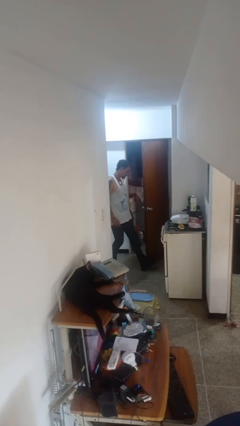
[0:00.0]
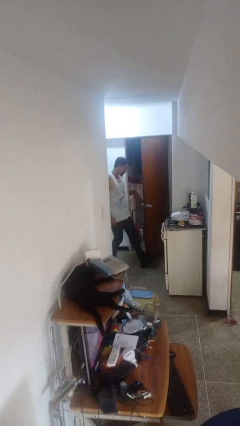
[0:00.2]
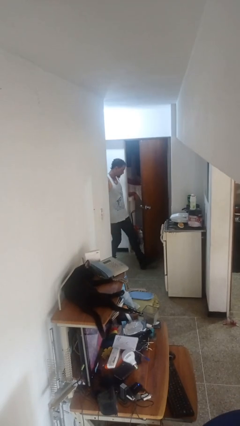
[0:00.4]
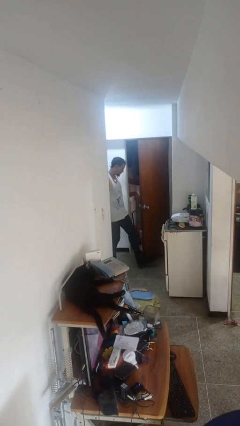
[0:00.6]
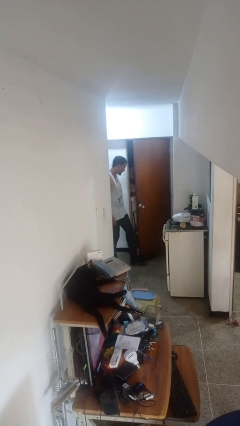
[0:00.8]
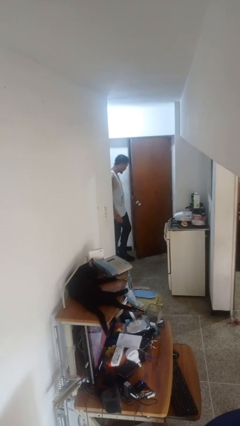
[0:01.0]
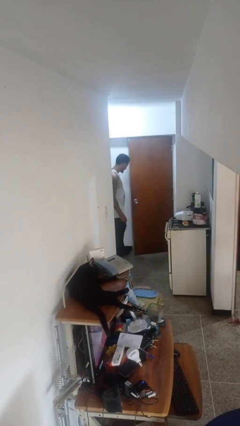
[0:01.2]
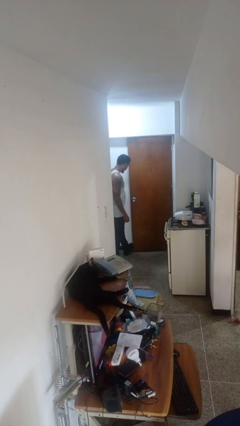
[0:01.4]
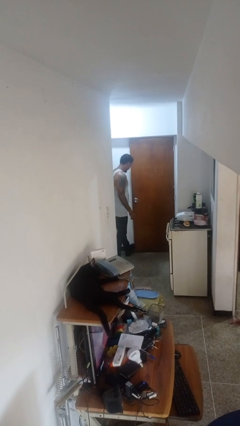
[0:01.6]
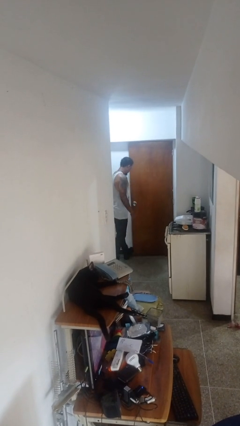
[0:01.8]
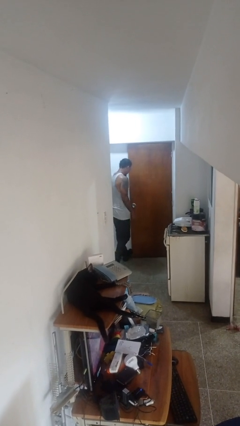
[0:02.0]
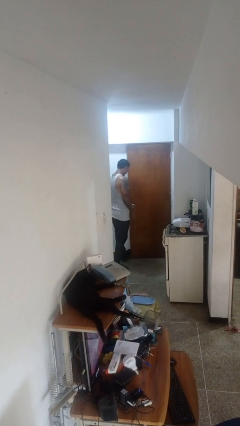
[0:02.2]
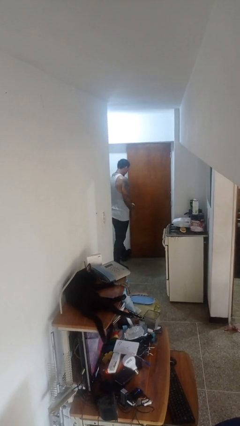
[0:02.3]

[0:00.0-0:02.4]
person closes door with foot

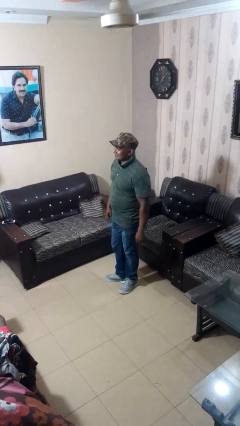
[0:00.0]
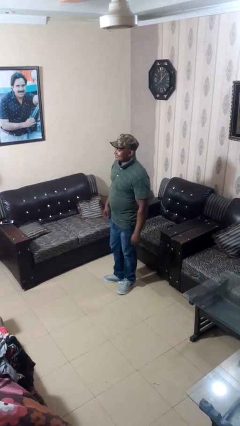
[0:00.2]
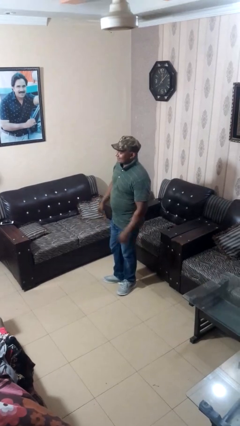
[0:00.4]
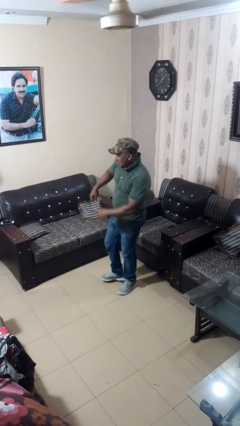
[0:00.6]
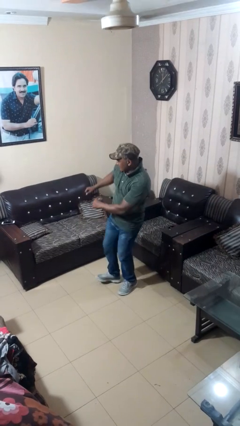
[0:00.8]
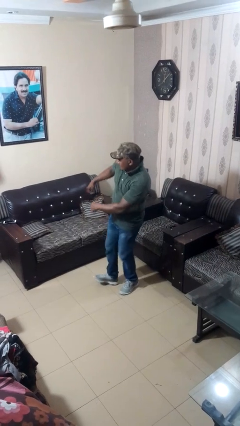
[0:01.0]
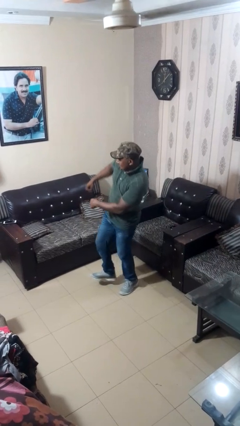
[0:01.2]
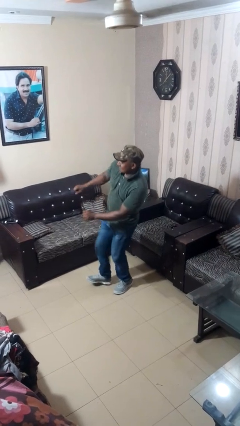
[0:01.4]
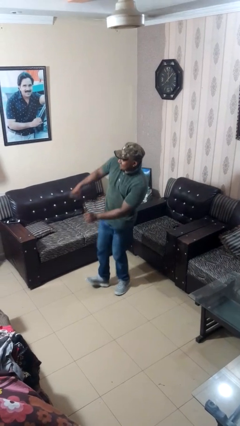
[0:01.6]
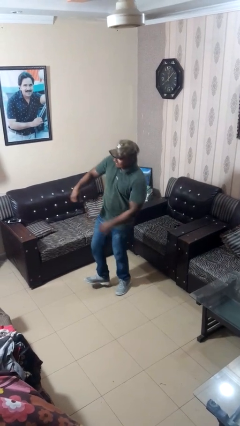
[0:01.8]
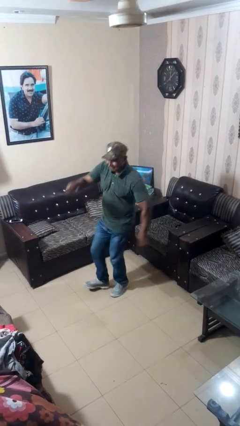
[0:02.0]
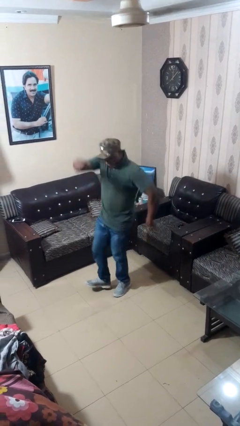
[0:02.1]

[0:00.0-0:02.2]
person dances in place

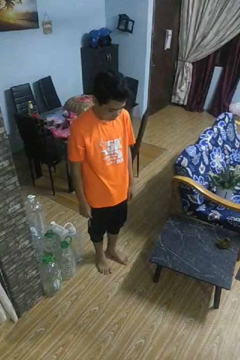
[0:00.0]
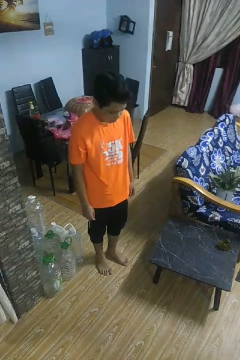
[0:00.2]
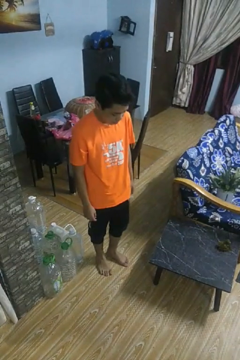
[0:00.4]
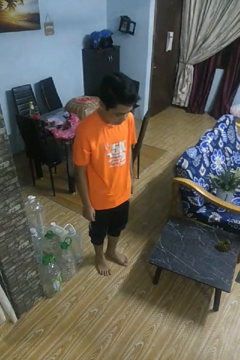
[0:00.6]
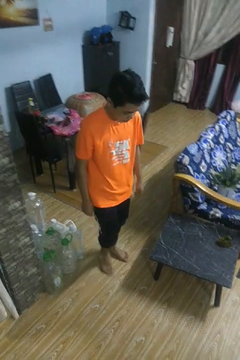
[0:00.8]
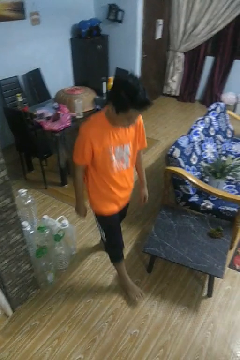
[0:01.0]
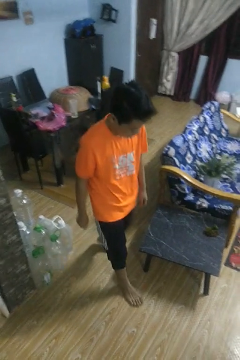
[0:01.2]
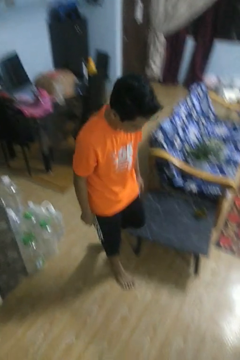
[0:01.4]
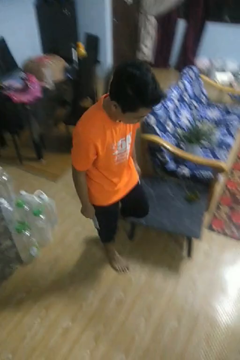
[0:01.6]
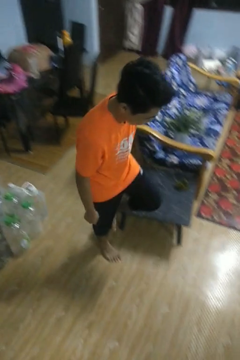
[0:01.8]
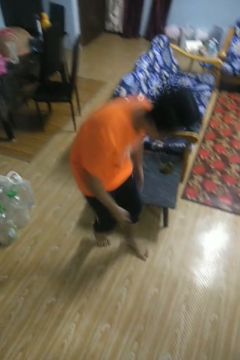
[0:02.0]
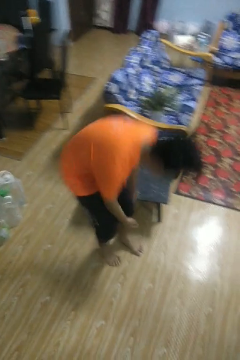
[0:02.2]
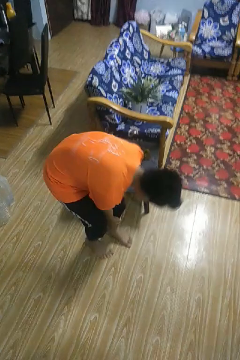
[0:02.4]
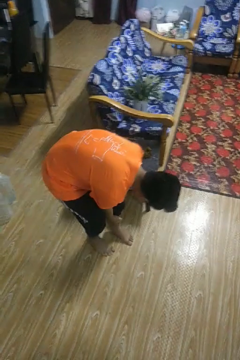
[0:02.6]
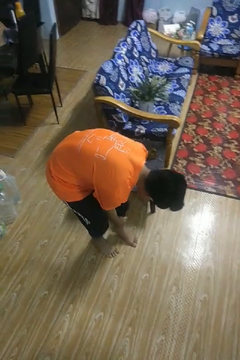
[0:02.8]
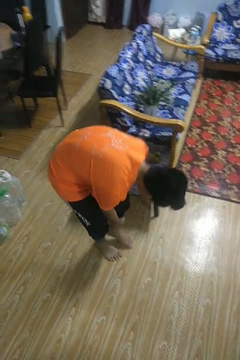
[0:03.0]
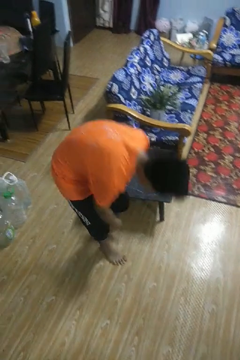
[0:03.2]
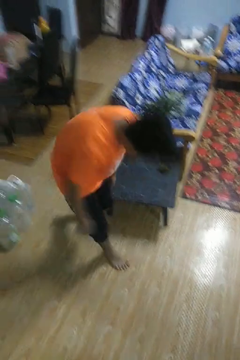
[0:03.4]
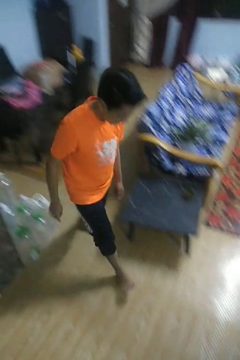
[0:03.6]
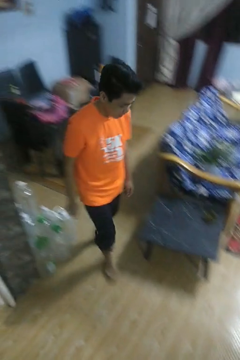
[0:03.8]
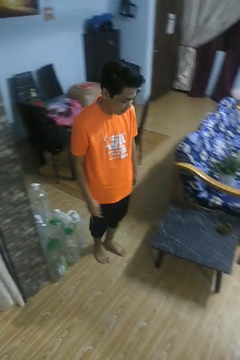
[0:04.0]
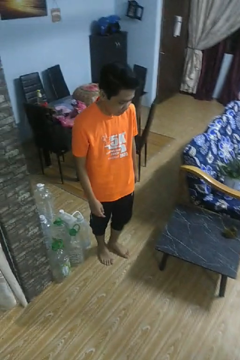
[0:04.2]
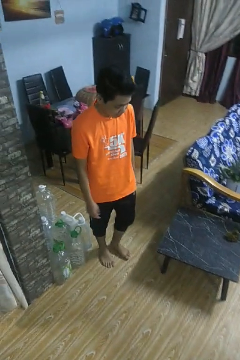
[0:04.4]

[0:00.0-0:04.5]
person bumps into table

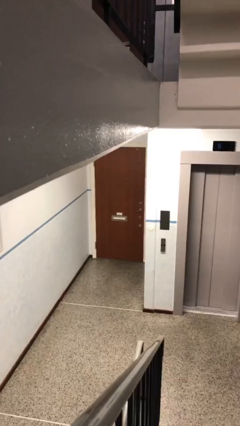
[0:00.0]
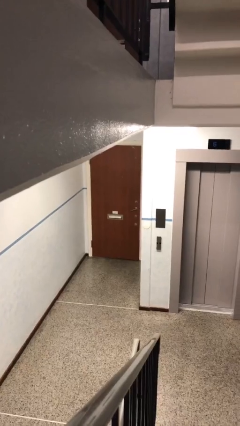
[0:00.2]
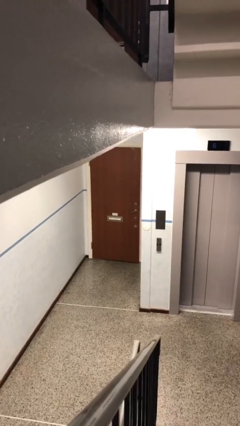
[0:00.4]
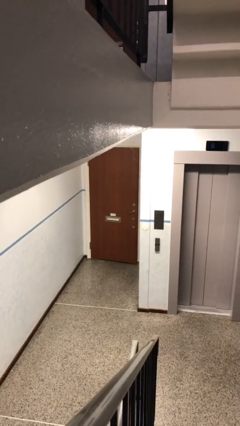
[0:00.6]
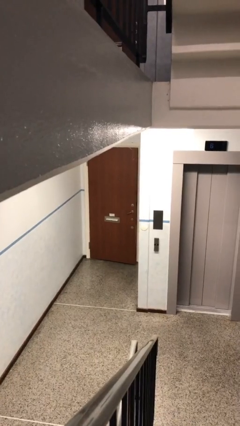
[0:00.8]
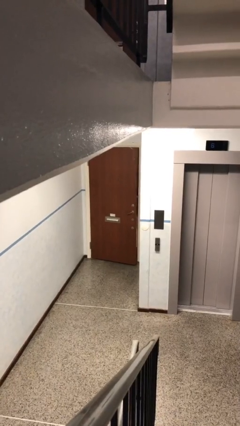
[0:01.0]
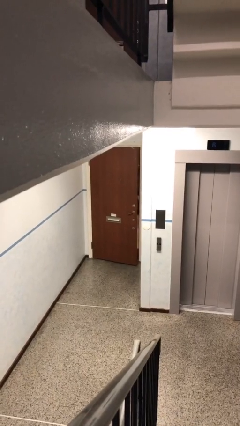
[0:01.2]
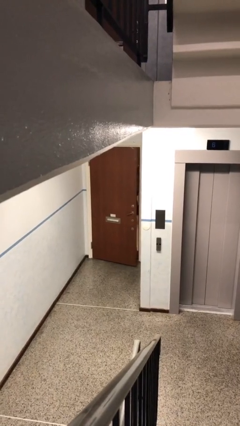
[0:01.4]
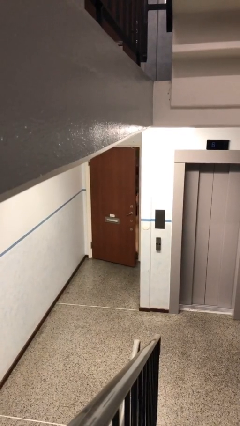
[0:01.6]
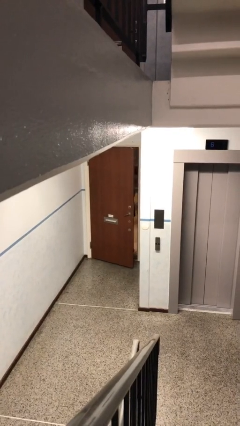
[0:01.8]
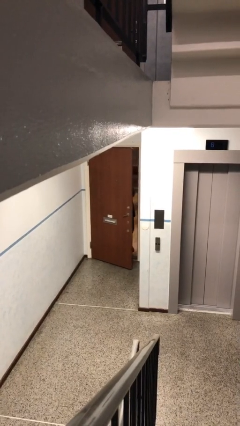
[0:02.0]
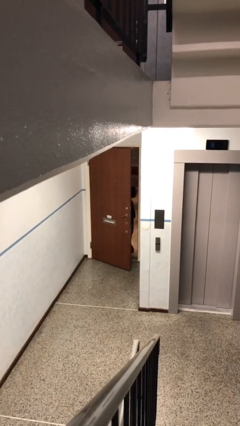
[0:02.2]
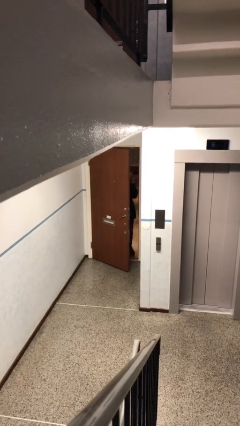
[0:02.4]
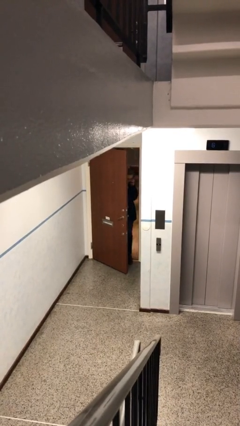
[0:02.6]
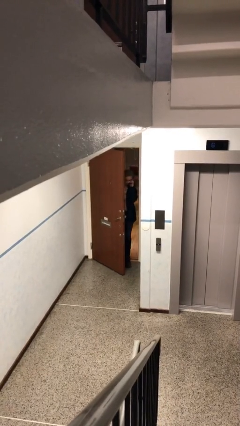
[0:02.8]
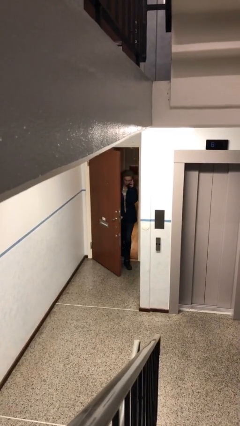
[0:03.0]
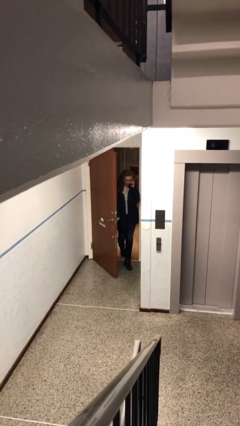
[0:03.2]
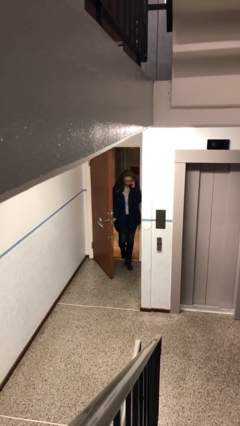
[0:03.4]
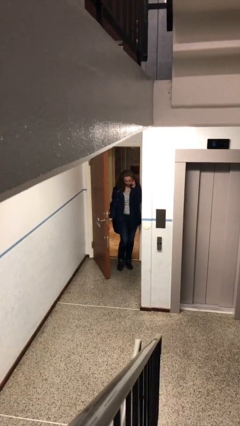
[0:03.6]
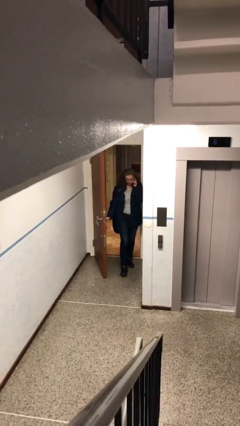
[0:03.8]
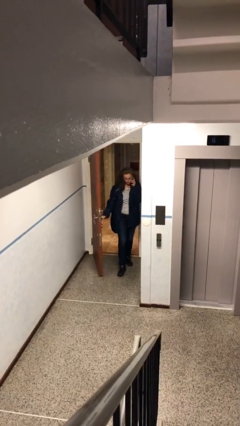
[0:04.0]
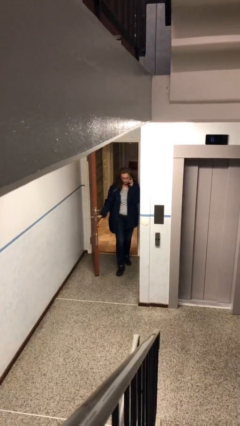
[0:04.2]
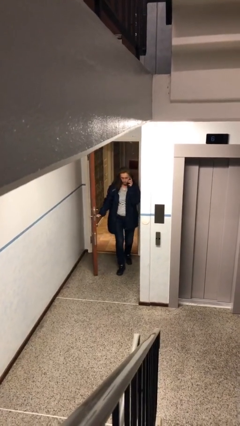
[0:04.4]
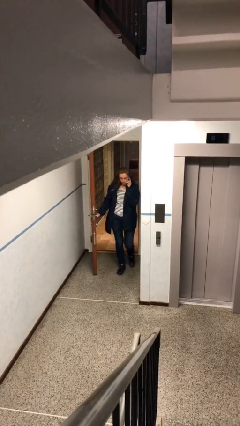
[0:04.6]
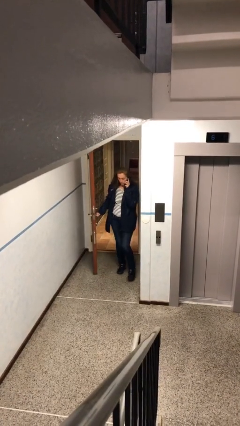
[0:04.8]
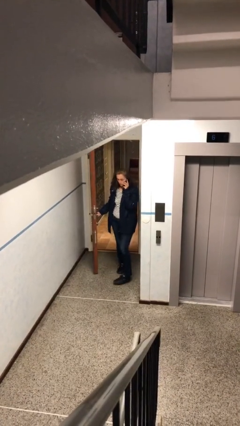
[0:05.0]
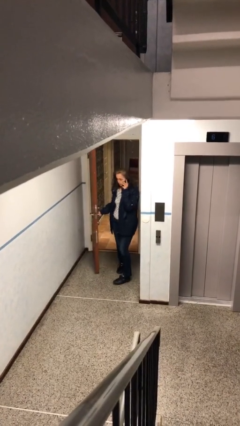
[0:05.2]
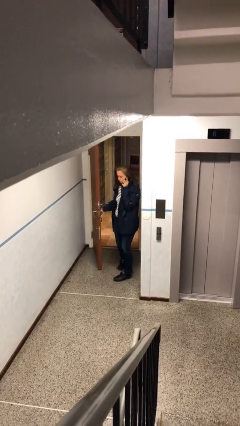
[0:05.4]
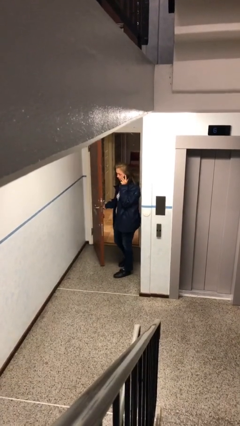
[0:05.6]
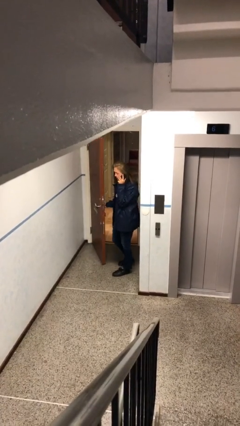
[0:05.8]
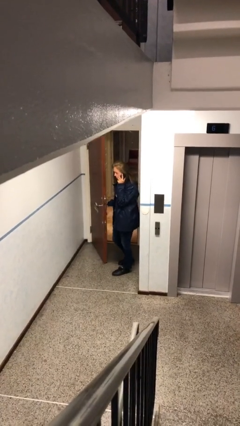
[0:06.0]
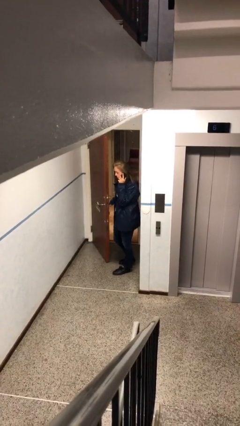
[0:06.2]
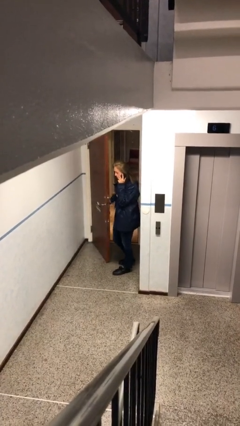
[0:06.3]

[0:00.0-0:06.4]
person opens facility door

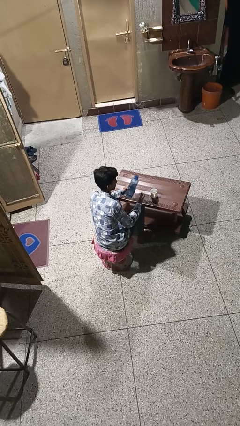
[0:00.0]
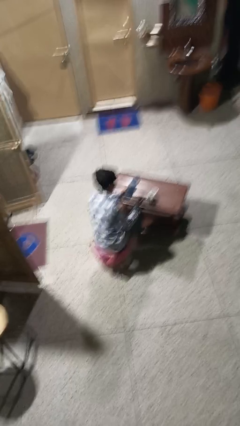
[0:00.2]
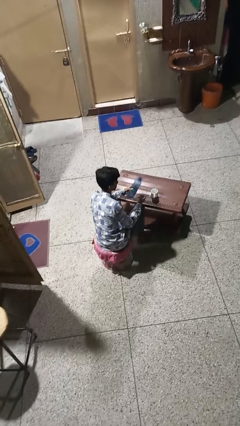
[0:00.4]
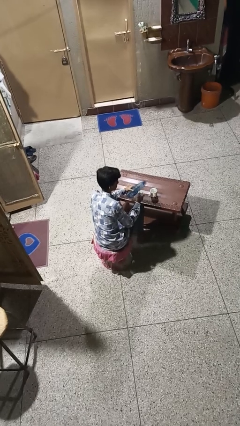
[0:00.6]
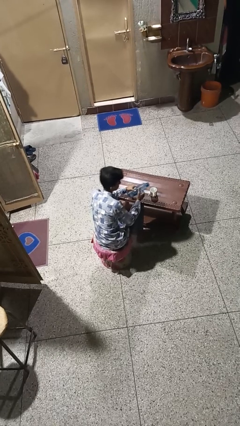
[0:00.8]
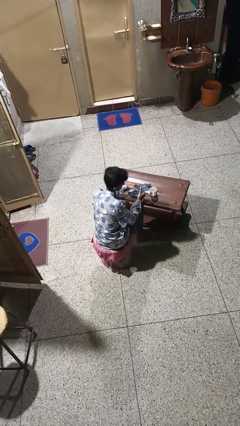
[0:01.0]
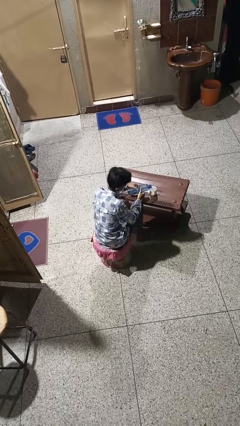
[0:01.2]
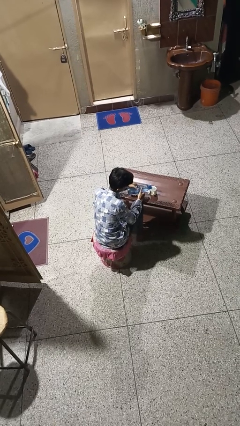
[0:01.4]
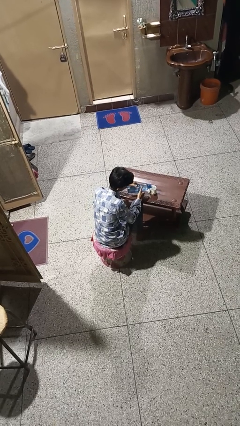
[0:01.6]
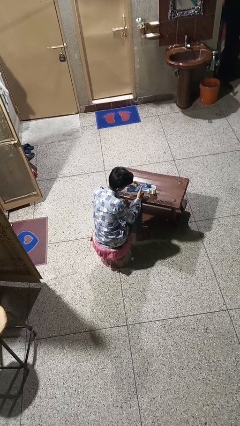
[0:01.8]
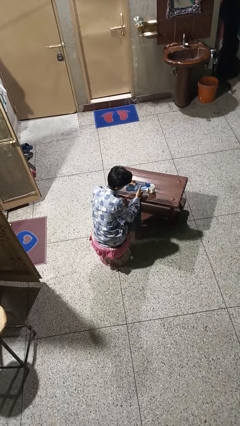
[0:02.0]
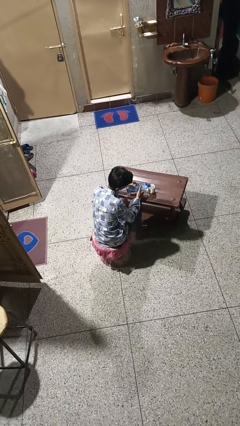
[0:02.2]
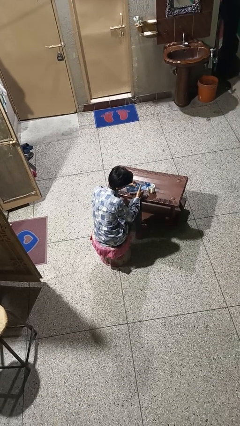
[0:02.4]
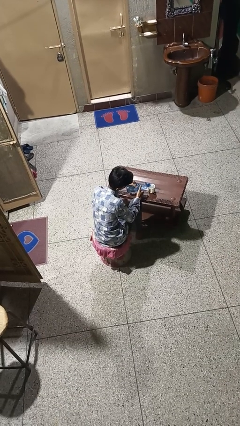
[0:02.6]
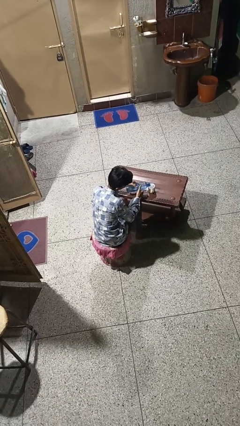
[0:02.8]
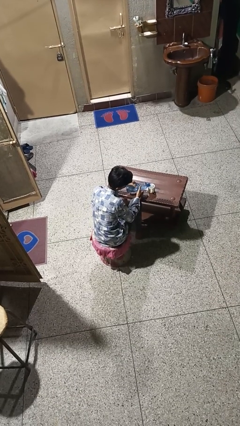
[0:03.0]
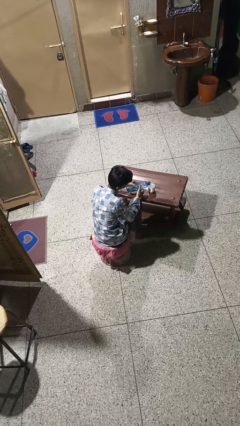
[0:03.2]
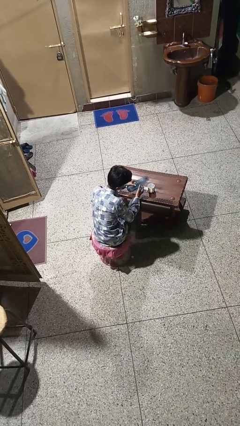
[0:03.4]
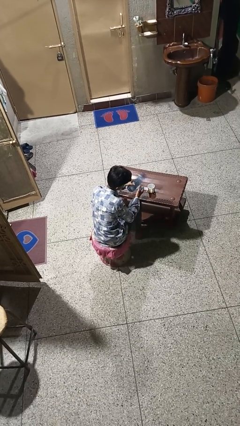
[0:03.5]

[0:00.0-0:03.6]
person pours liquid into cup
